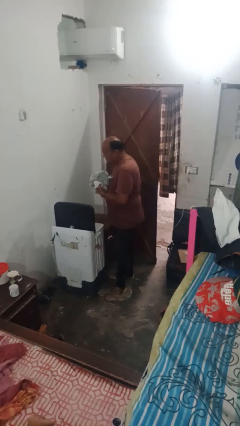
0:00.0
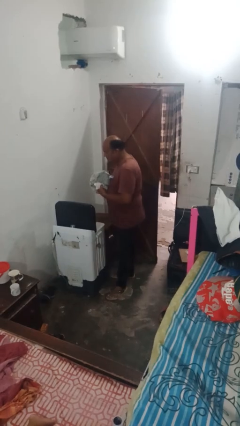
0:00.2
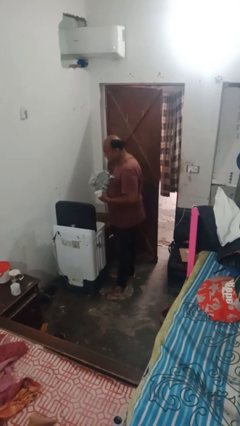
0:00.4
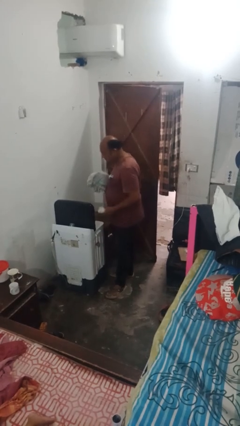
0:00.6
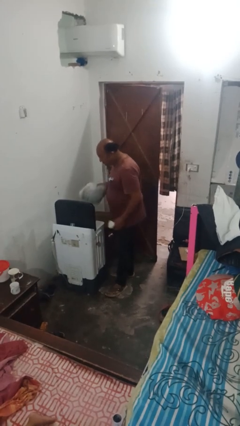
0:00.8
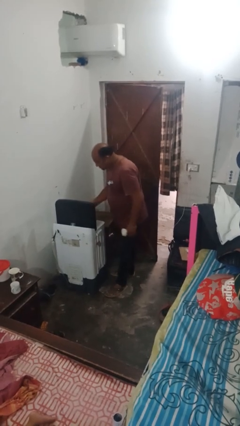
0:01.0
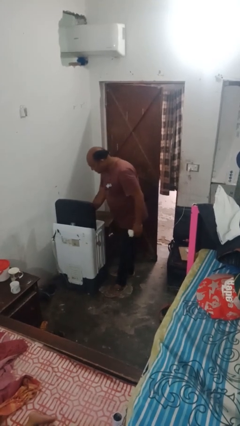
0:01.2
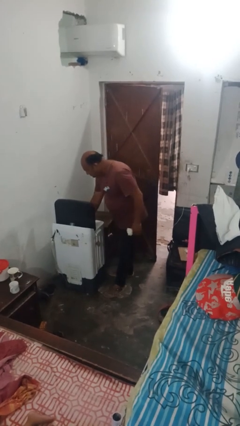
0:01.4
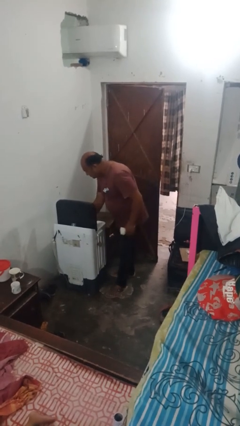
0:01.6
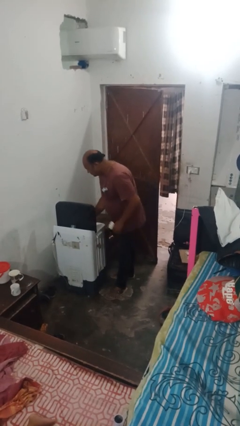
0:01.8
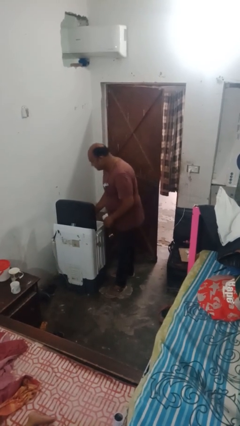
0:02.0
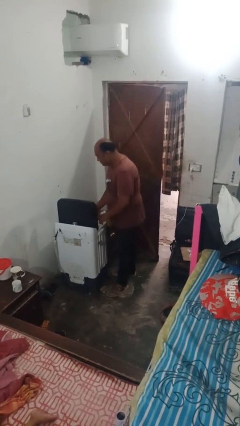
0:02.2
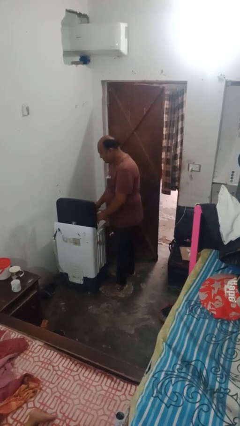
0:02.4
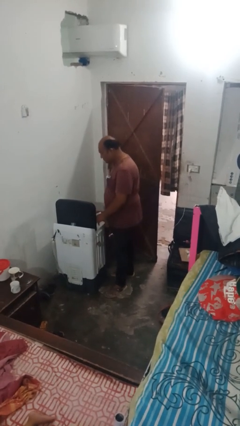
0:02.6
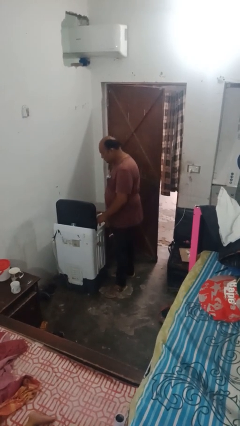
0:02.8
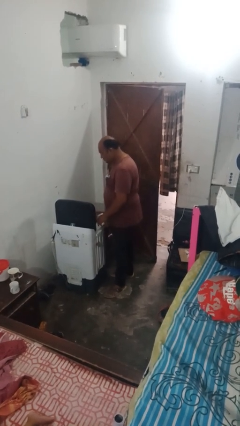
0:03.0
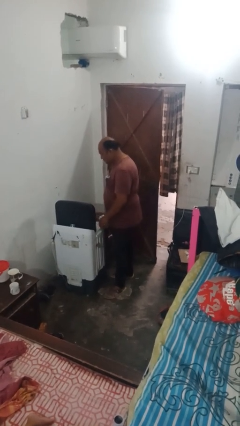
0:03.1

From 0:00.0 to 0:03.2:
person loads dryer

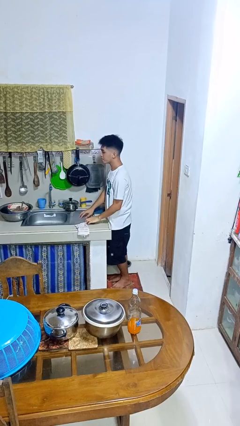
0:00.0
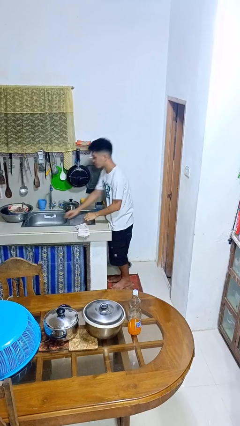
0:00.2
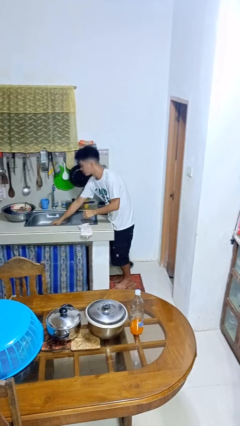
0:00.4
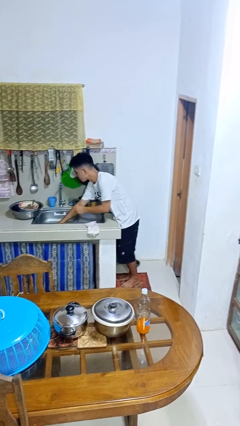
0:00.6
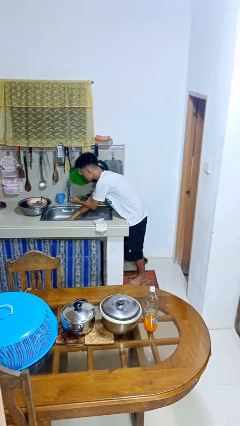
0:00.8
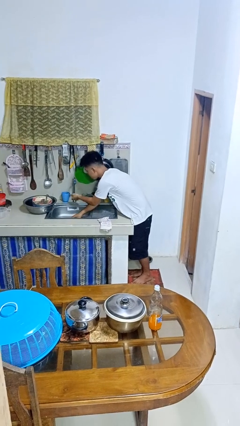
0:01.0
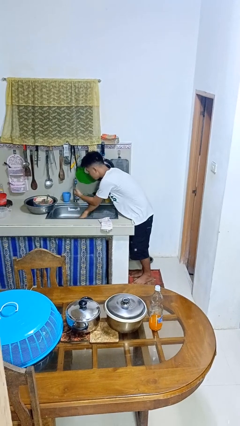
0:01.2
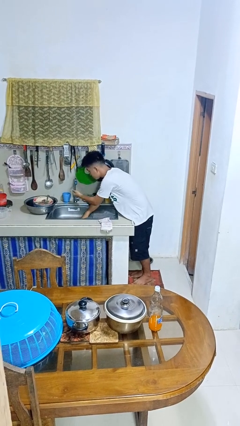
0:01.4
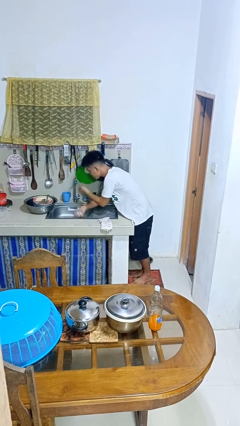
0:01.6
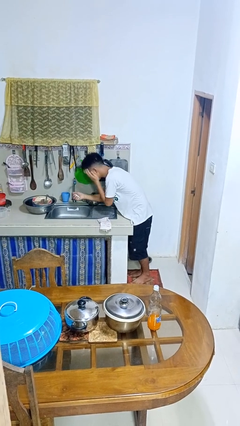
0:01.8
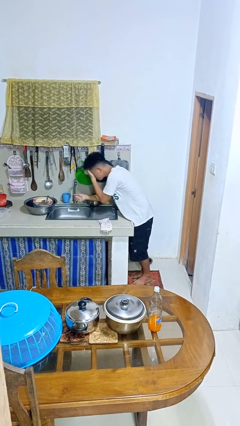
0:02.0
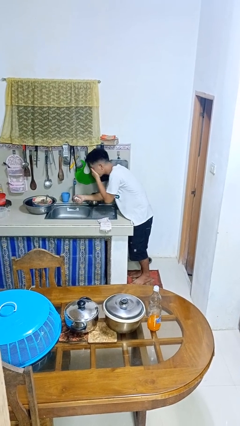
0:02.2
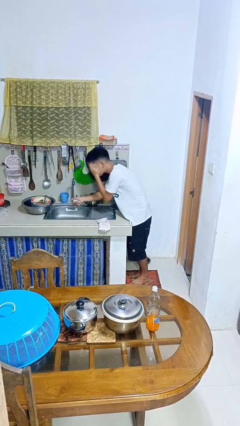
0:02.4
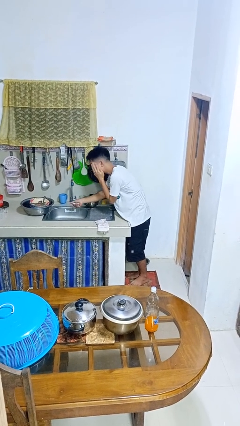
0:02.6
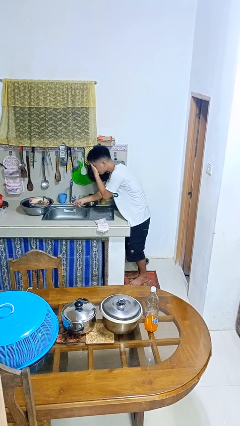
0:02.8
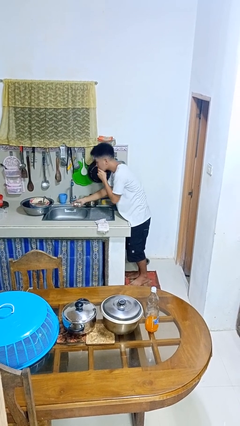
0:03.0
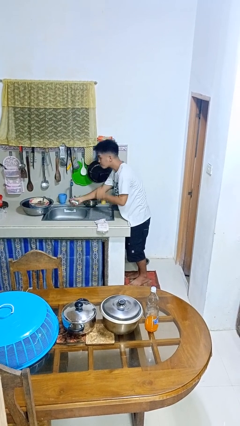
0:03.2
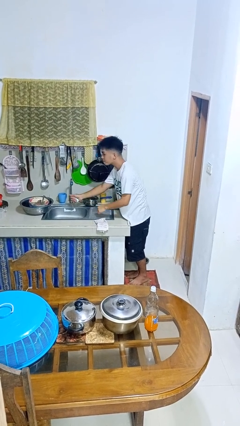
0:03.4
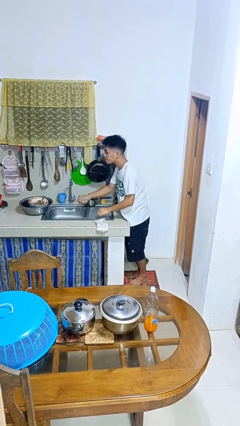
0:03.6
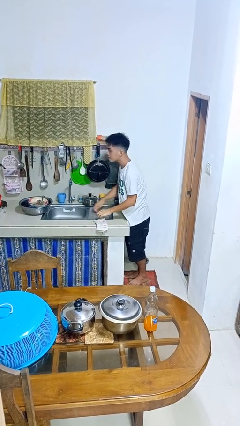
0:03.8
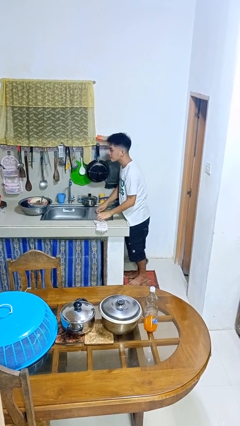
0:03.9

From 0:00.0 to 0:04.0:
person washes face

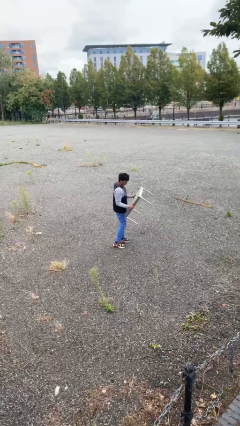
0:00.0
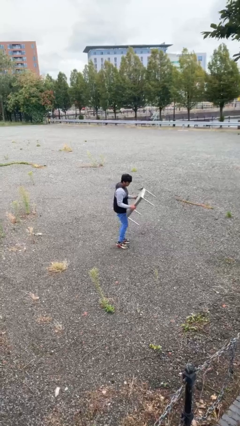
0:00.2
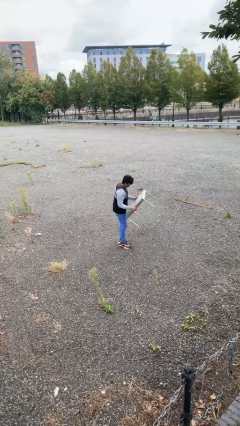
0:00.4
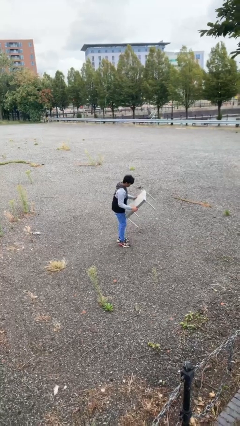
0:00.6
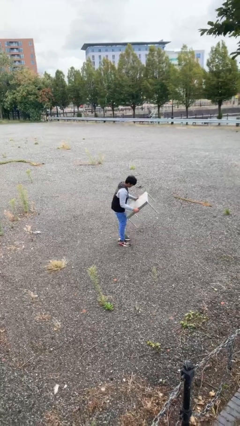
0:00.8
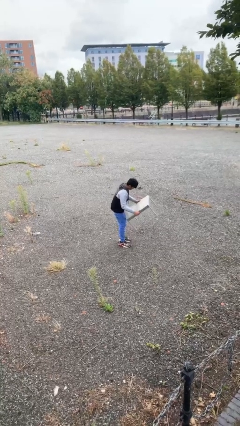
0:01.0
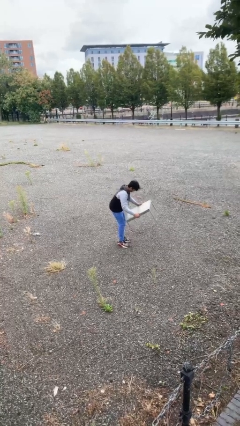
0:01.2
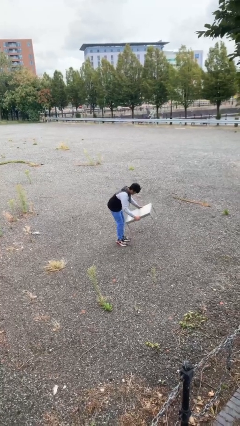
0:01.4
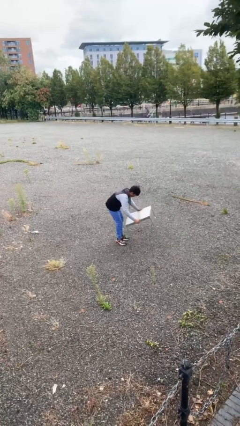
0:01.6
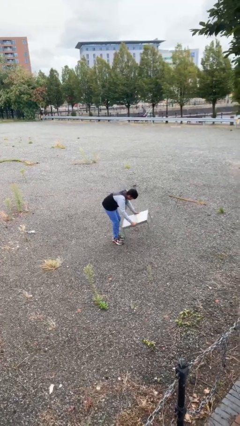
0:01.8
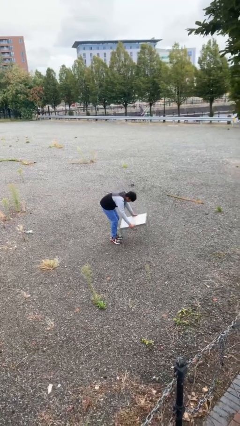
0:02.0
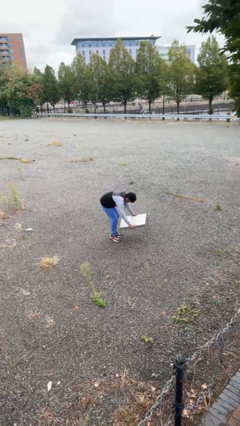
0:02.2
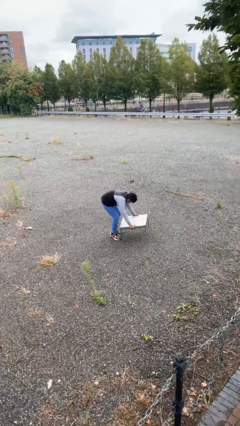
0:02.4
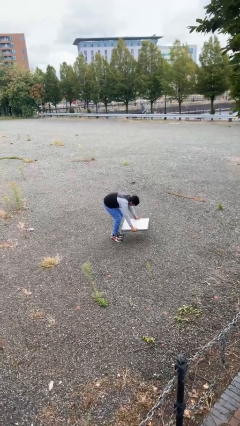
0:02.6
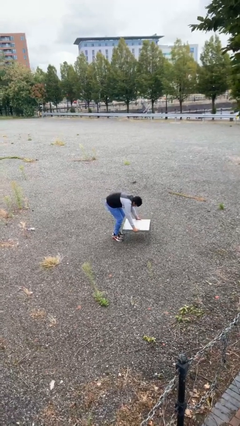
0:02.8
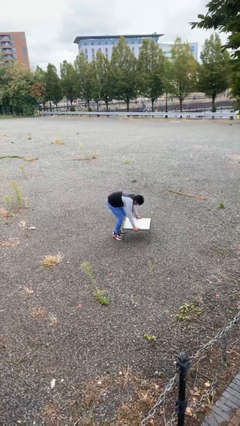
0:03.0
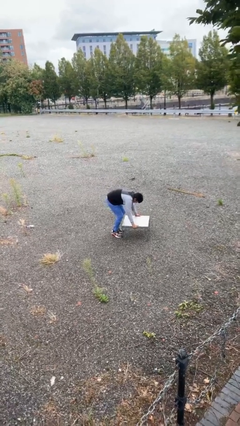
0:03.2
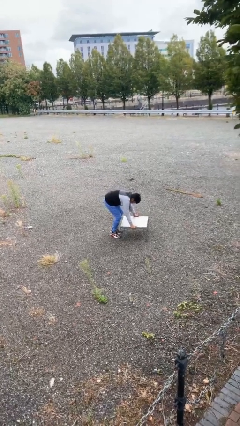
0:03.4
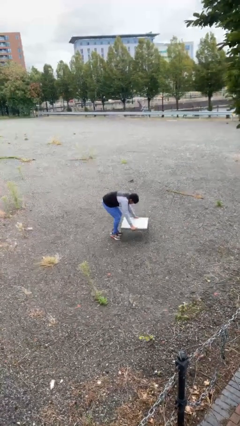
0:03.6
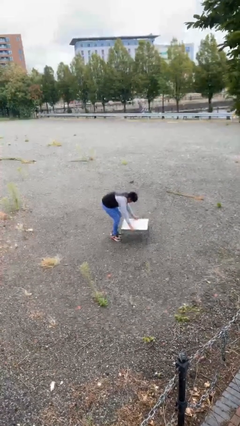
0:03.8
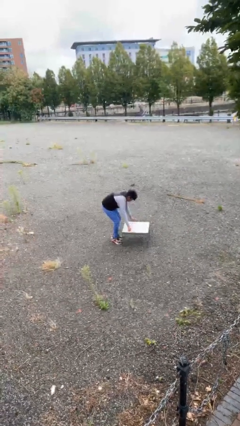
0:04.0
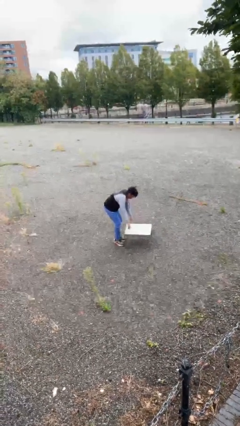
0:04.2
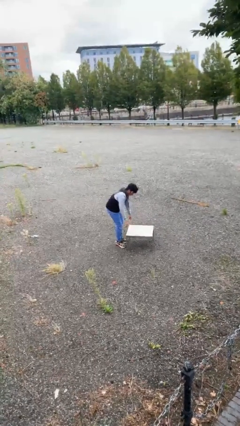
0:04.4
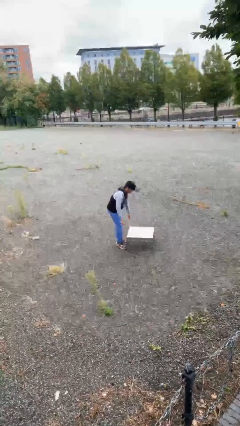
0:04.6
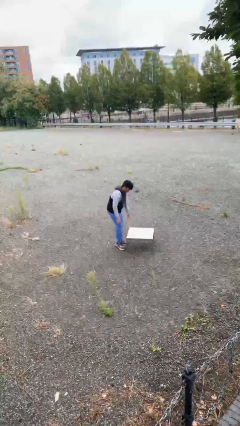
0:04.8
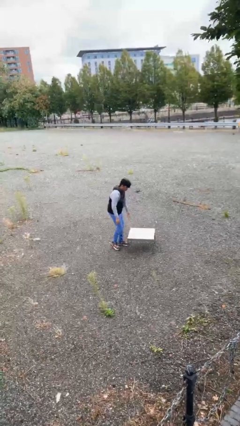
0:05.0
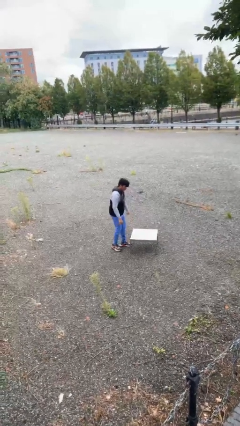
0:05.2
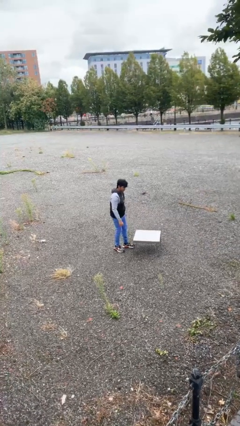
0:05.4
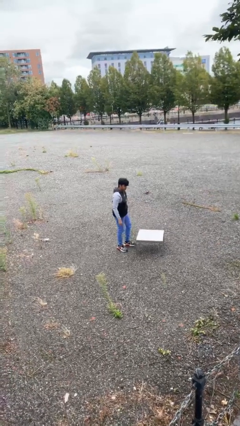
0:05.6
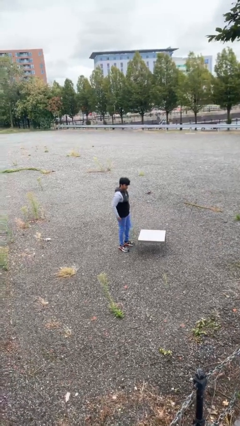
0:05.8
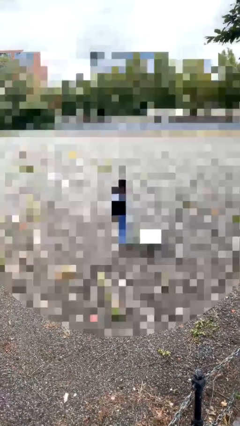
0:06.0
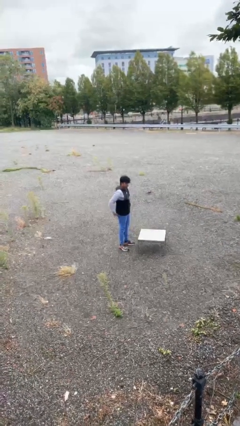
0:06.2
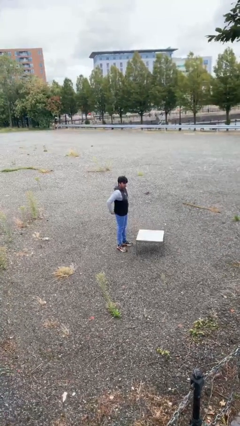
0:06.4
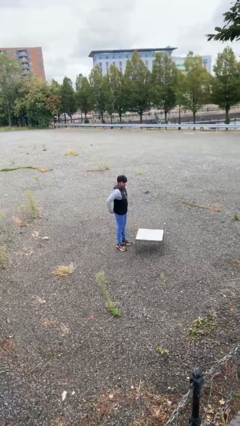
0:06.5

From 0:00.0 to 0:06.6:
person puts down object on floor

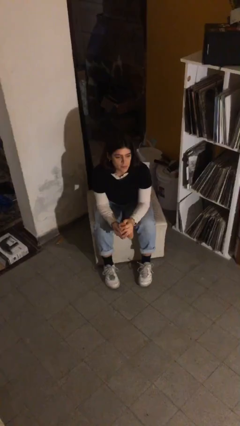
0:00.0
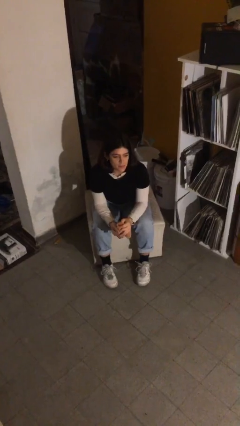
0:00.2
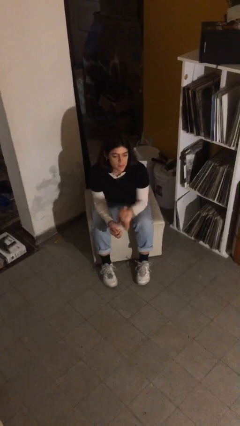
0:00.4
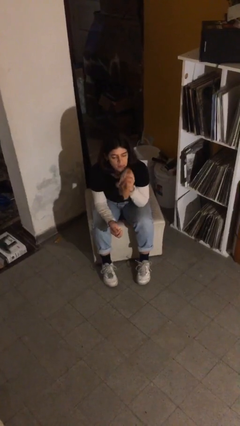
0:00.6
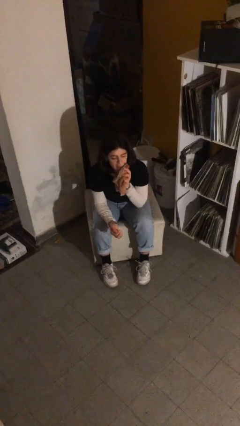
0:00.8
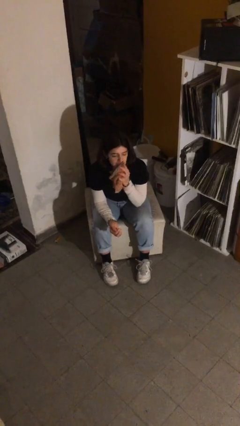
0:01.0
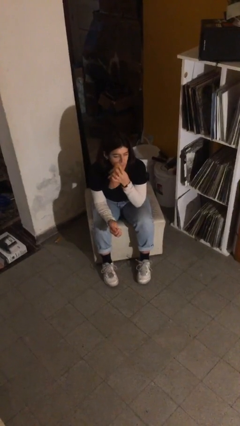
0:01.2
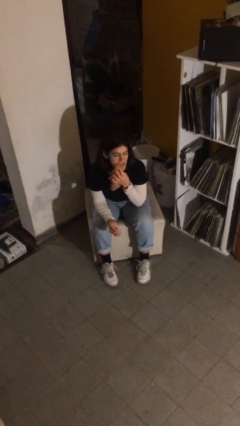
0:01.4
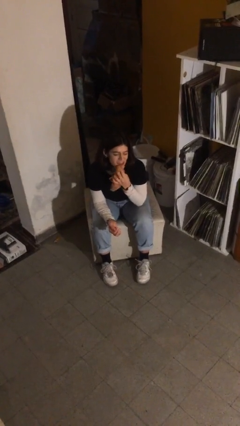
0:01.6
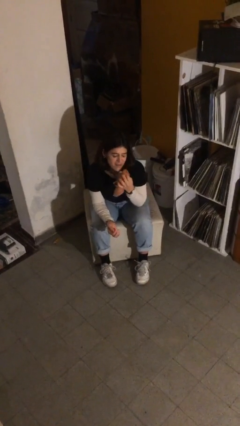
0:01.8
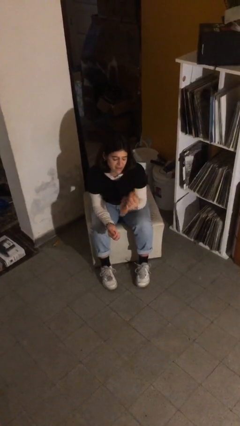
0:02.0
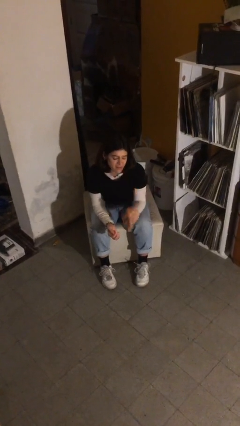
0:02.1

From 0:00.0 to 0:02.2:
person wipes mouth with napkin

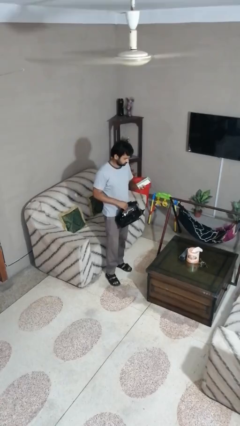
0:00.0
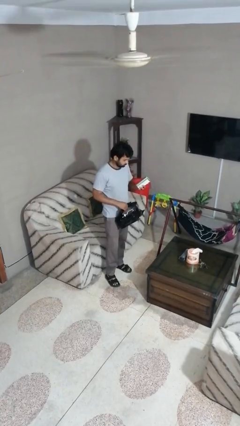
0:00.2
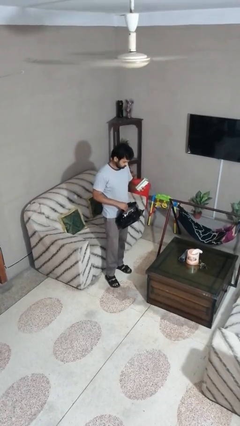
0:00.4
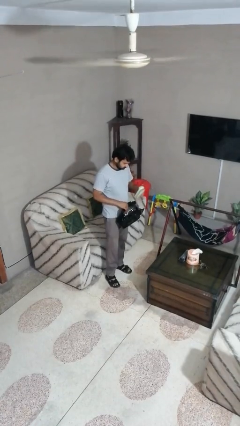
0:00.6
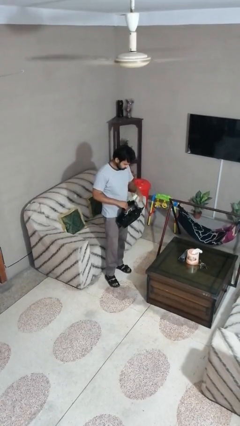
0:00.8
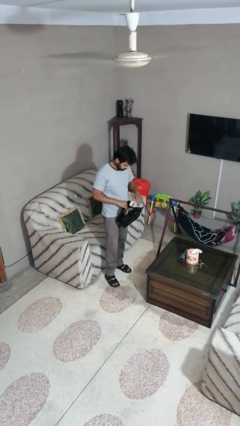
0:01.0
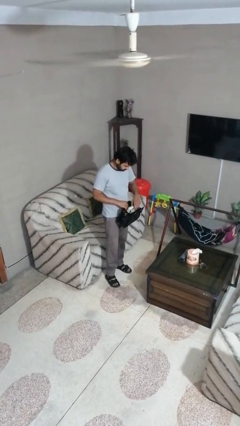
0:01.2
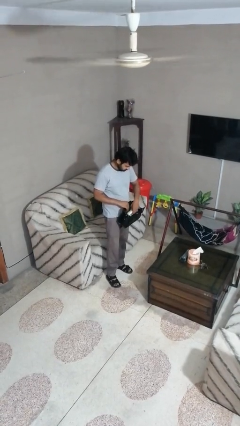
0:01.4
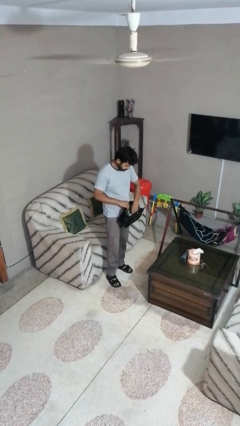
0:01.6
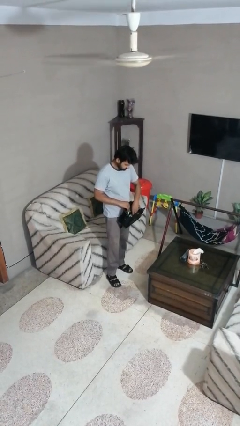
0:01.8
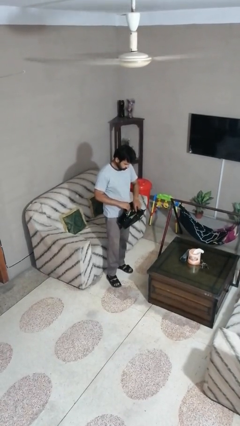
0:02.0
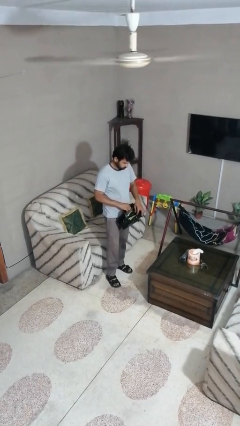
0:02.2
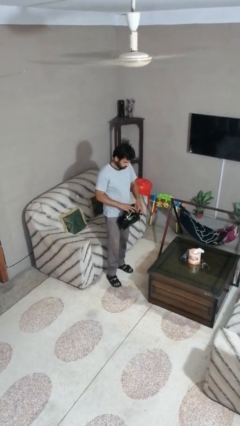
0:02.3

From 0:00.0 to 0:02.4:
person puts object into purse
